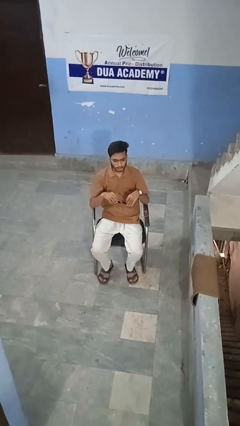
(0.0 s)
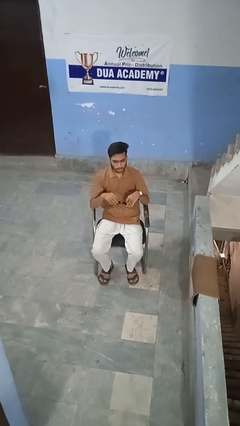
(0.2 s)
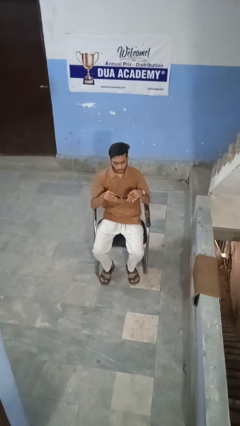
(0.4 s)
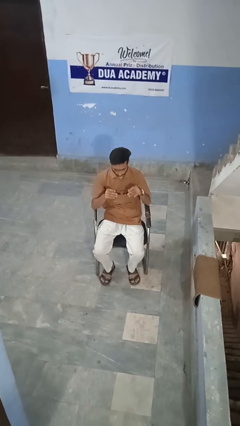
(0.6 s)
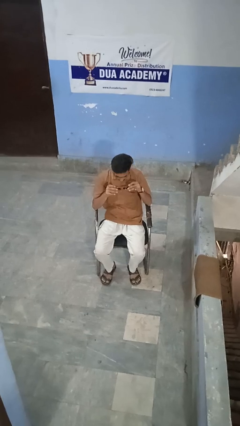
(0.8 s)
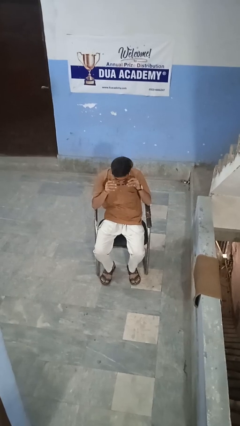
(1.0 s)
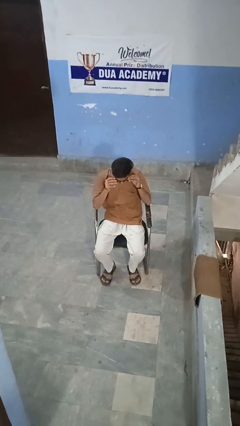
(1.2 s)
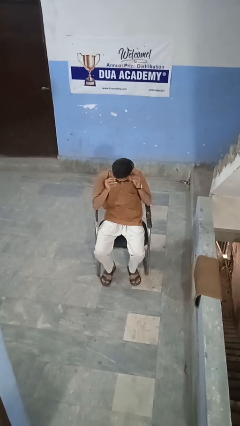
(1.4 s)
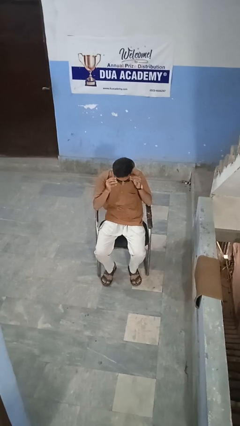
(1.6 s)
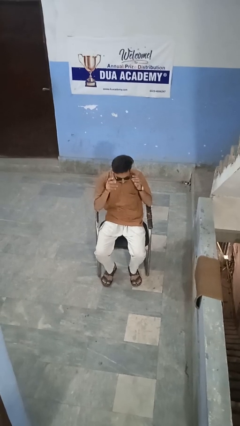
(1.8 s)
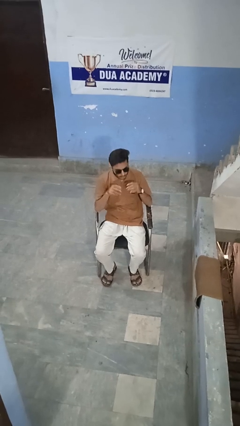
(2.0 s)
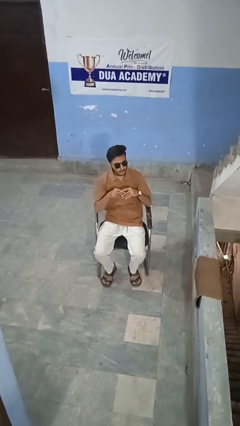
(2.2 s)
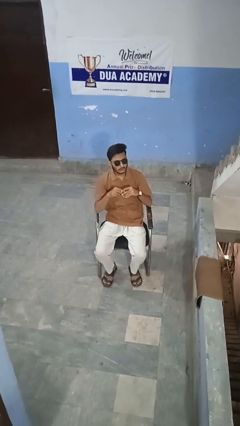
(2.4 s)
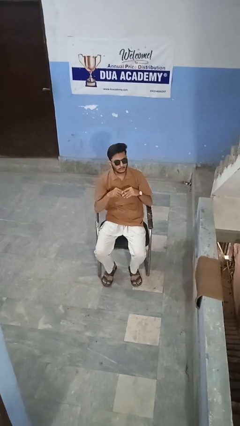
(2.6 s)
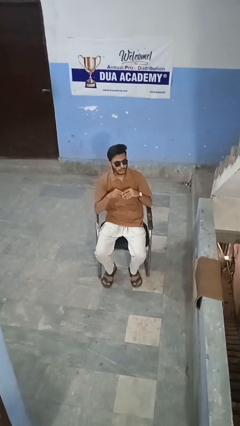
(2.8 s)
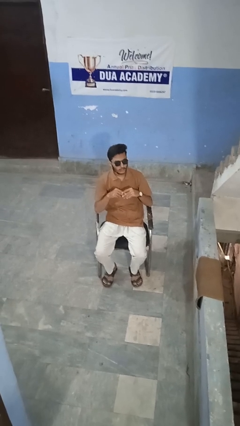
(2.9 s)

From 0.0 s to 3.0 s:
person puts on sunglasses

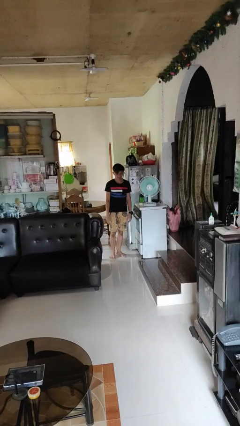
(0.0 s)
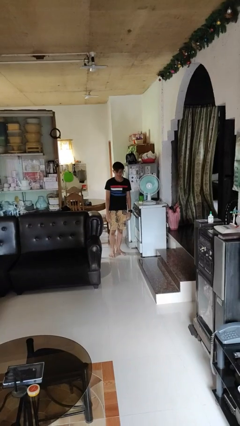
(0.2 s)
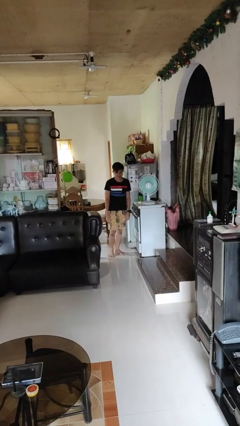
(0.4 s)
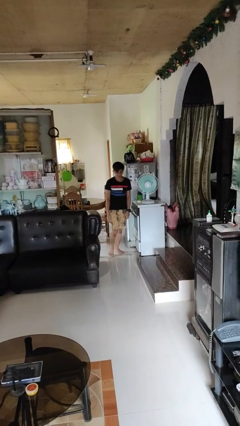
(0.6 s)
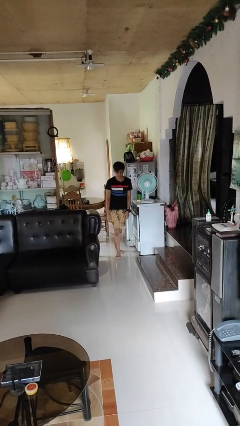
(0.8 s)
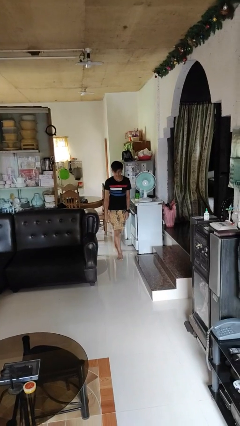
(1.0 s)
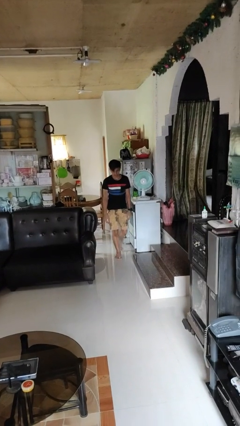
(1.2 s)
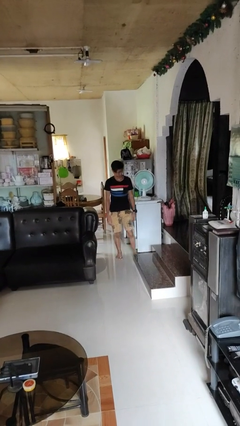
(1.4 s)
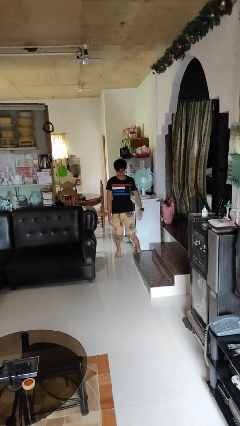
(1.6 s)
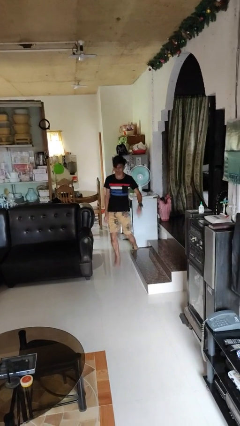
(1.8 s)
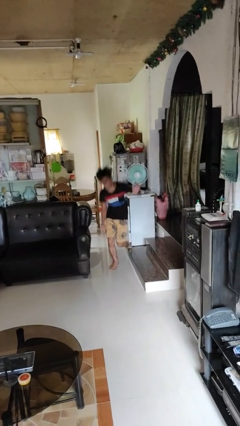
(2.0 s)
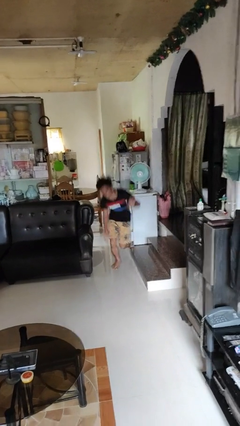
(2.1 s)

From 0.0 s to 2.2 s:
person trips on object on floor

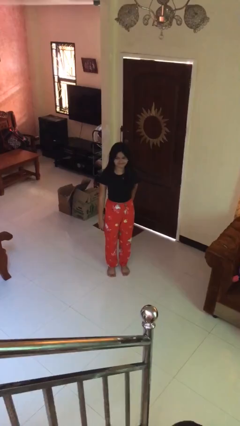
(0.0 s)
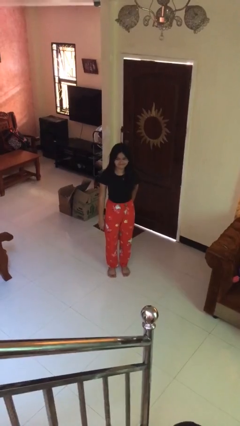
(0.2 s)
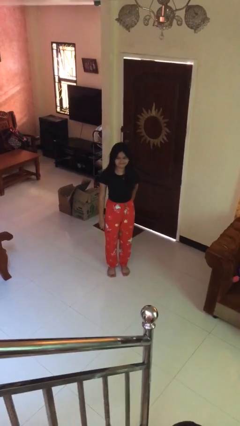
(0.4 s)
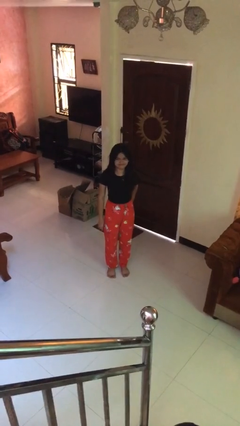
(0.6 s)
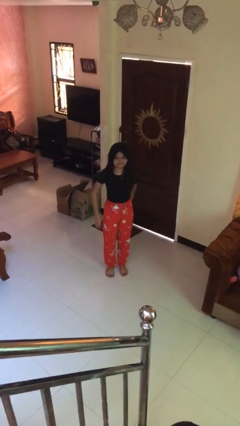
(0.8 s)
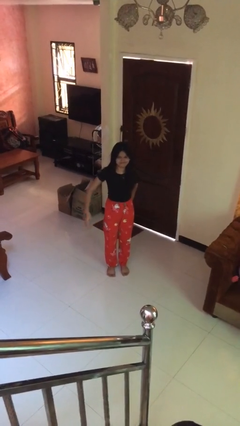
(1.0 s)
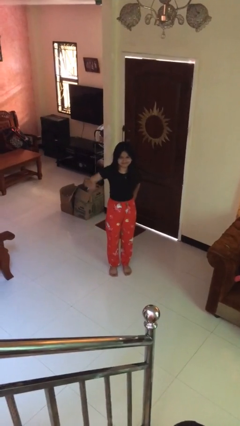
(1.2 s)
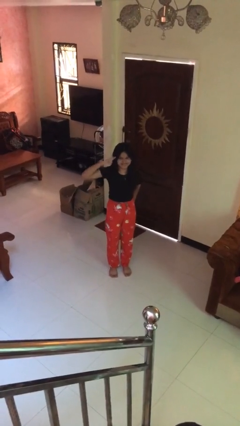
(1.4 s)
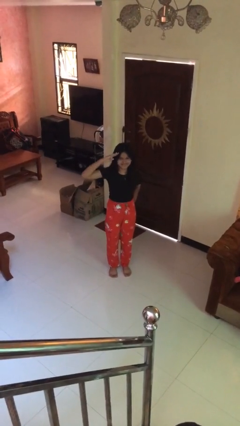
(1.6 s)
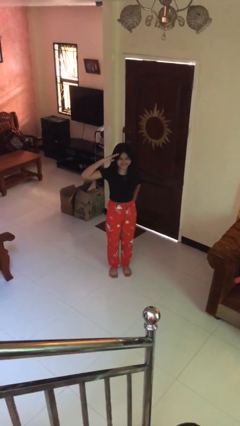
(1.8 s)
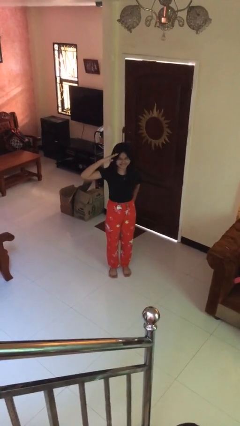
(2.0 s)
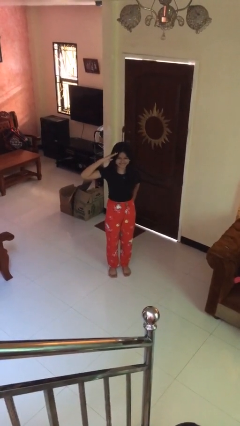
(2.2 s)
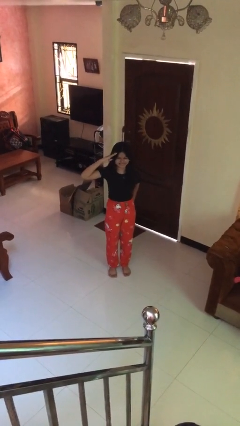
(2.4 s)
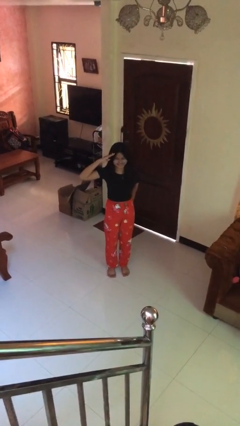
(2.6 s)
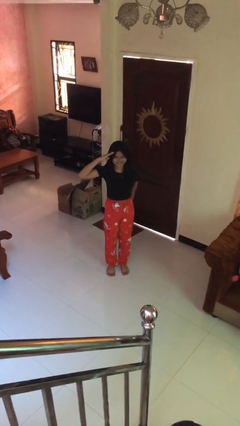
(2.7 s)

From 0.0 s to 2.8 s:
person salutes

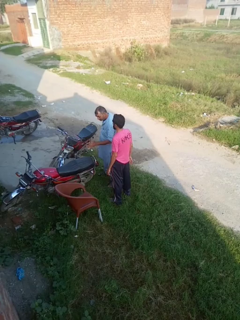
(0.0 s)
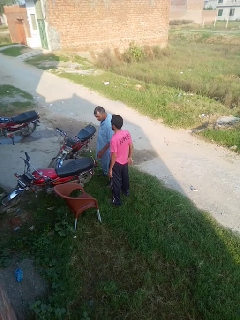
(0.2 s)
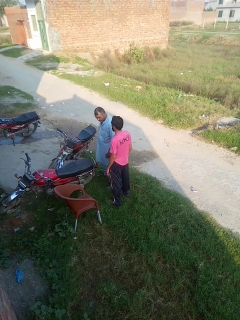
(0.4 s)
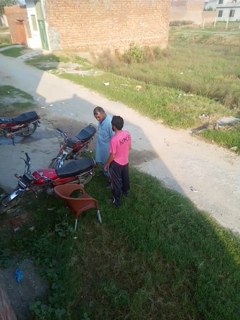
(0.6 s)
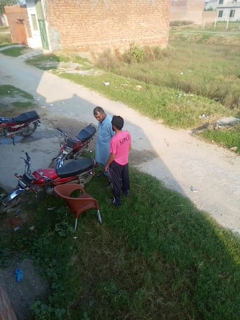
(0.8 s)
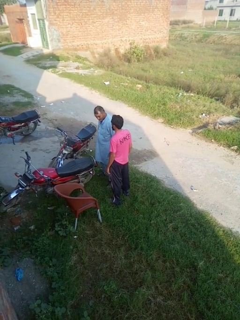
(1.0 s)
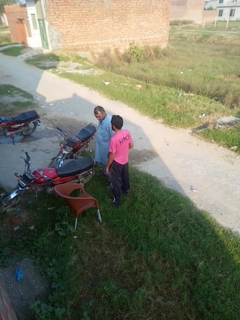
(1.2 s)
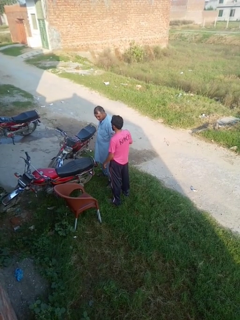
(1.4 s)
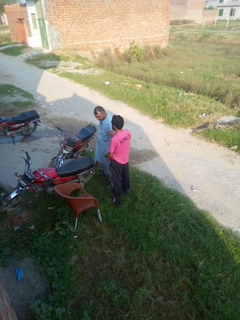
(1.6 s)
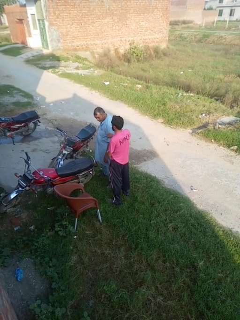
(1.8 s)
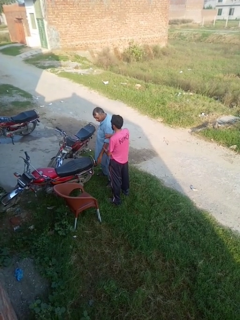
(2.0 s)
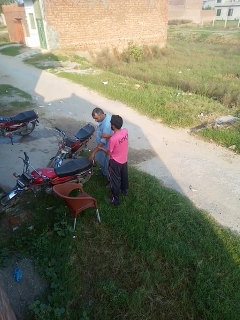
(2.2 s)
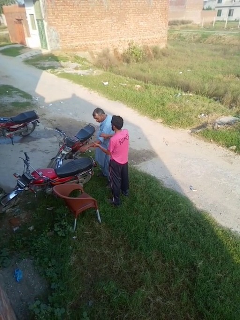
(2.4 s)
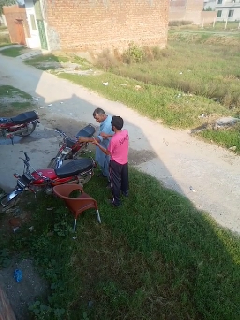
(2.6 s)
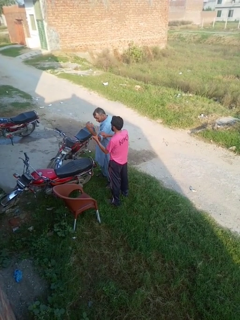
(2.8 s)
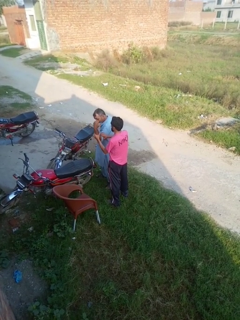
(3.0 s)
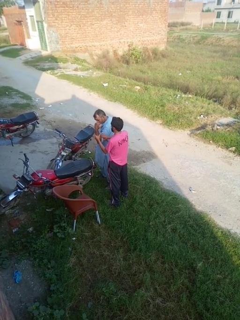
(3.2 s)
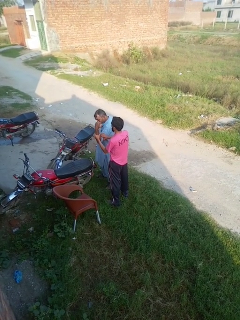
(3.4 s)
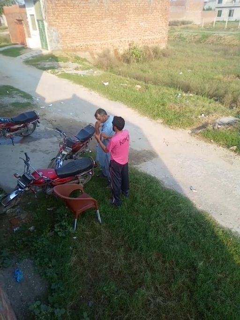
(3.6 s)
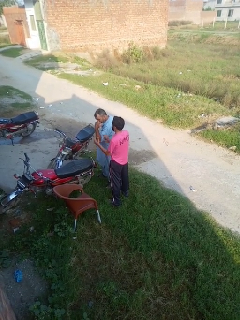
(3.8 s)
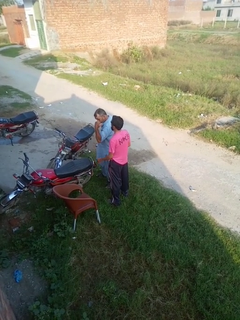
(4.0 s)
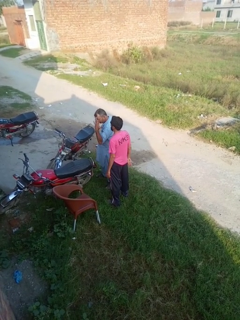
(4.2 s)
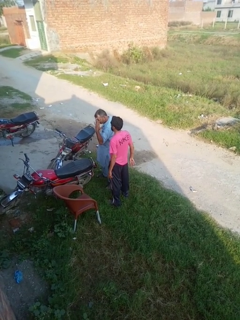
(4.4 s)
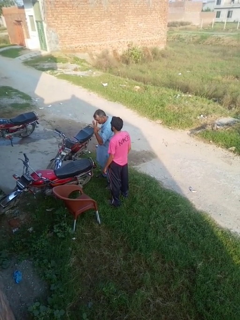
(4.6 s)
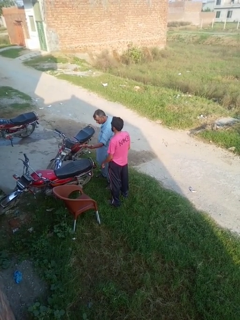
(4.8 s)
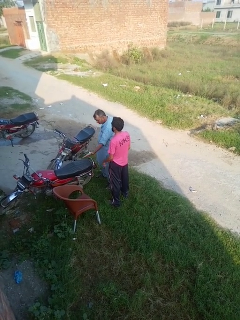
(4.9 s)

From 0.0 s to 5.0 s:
person grabs person by bicep

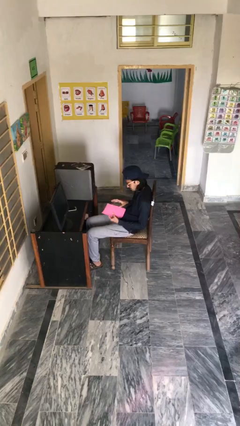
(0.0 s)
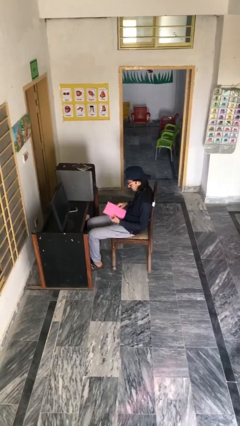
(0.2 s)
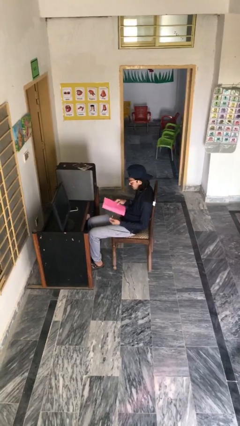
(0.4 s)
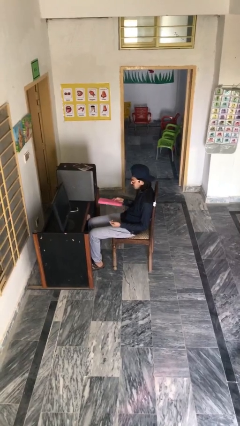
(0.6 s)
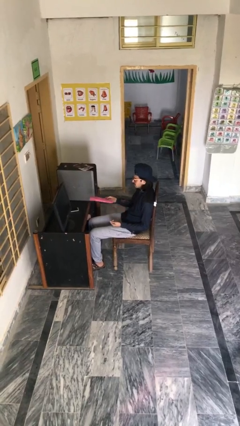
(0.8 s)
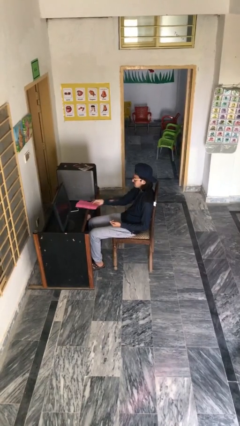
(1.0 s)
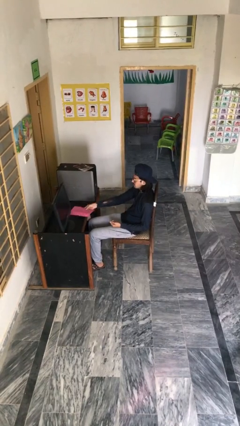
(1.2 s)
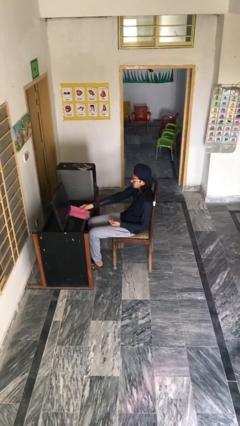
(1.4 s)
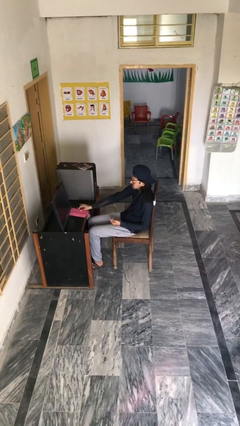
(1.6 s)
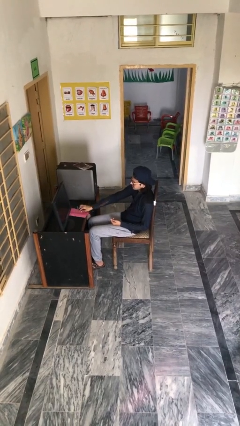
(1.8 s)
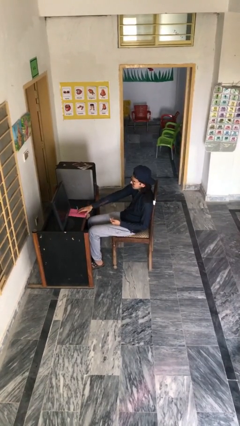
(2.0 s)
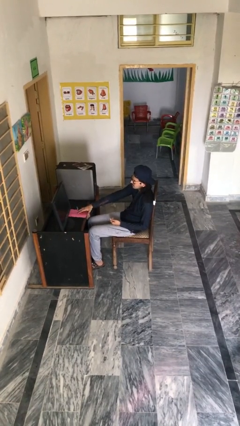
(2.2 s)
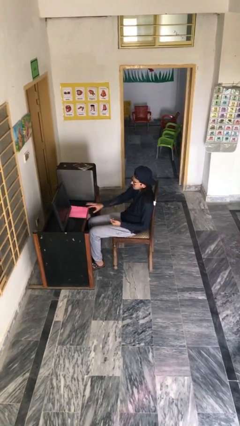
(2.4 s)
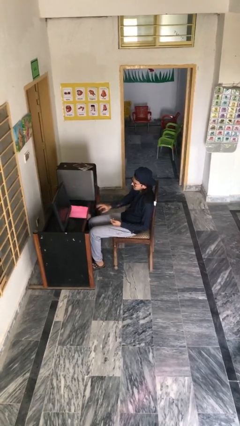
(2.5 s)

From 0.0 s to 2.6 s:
person puts down object on table

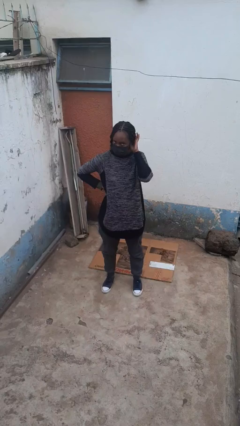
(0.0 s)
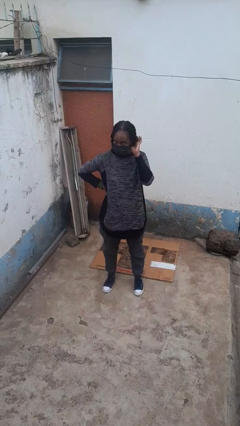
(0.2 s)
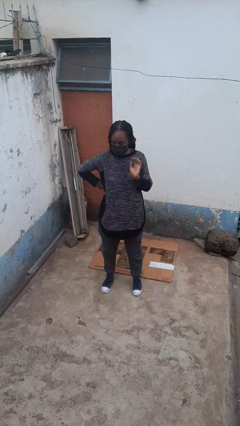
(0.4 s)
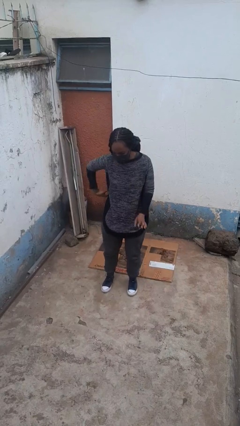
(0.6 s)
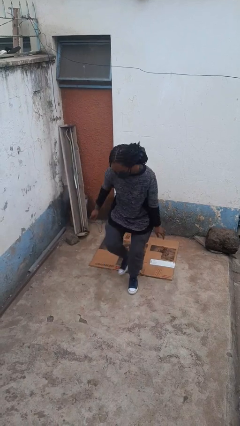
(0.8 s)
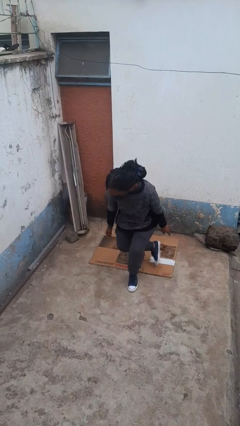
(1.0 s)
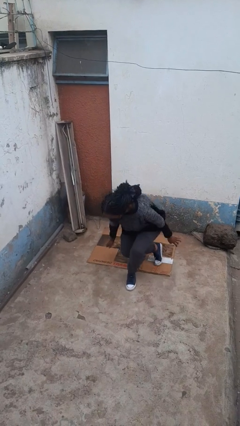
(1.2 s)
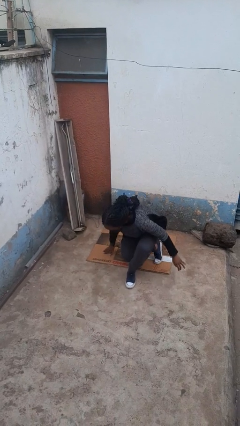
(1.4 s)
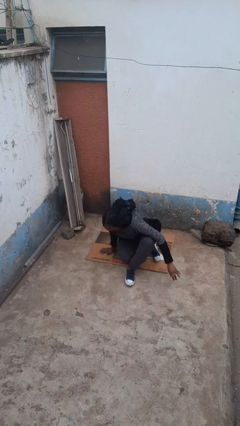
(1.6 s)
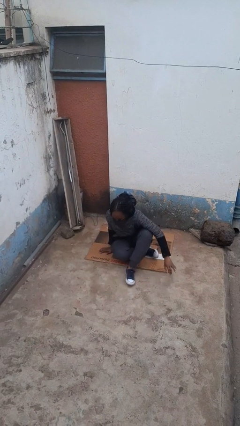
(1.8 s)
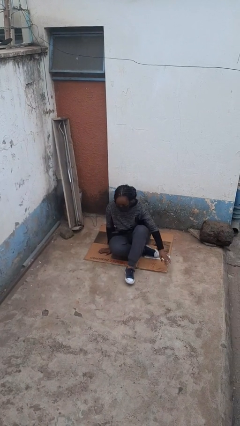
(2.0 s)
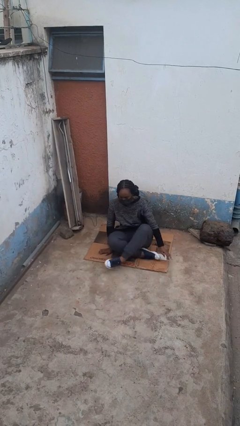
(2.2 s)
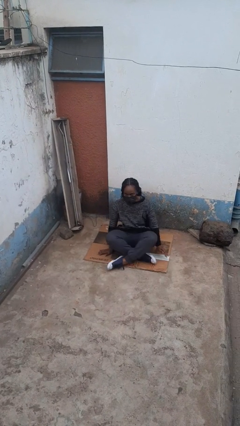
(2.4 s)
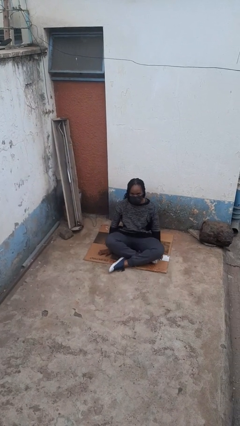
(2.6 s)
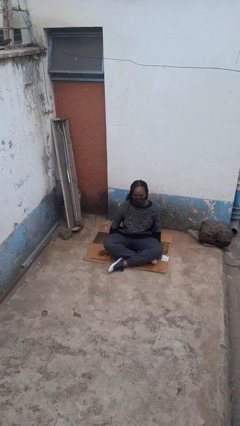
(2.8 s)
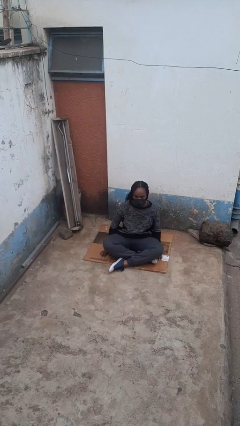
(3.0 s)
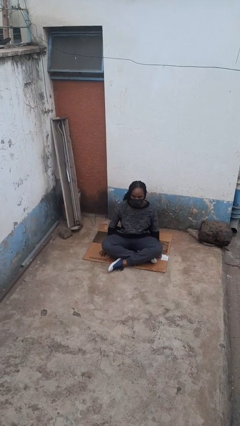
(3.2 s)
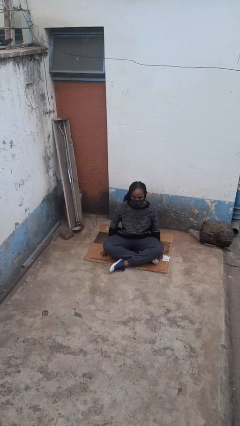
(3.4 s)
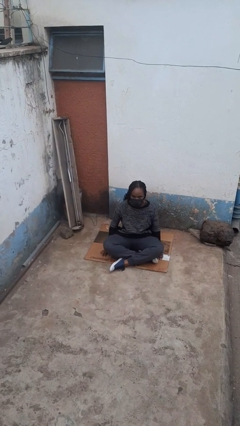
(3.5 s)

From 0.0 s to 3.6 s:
person sits crisscross
